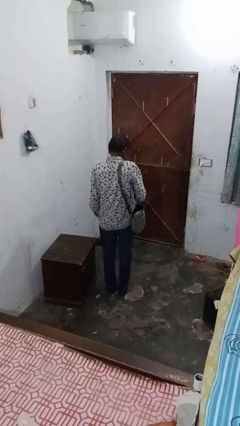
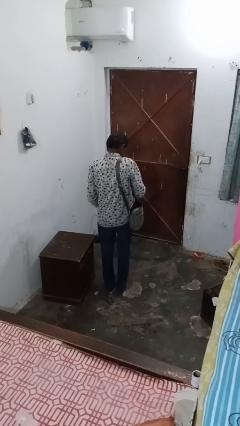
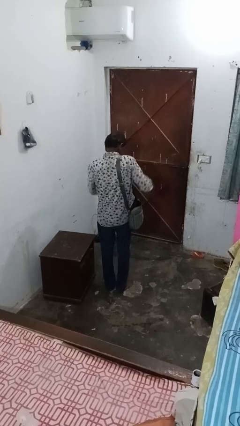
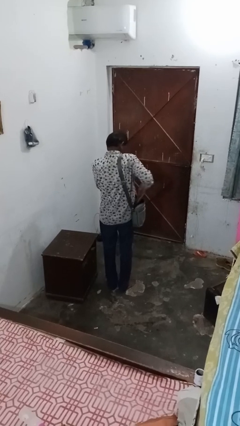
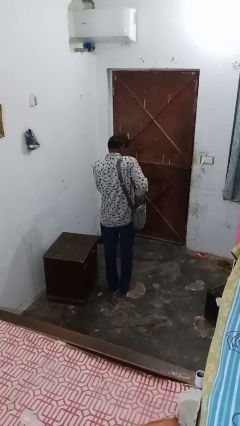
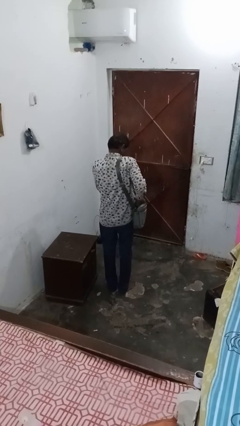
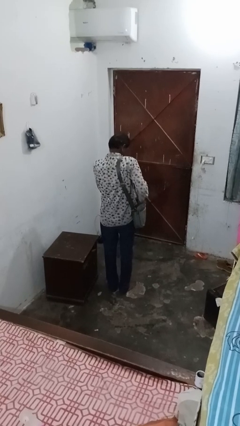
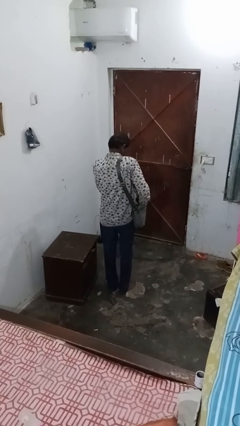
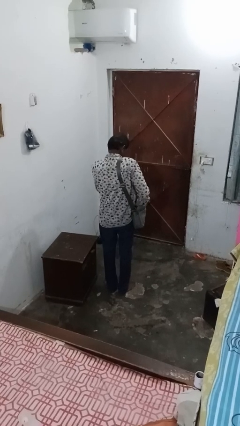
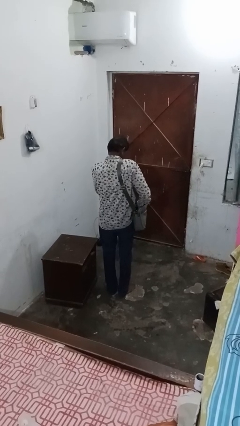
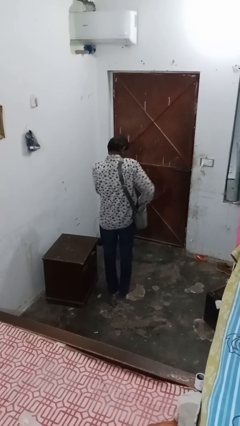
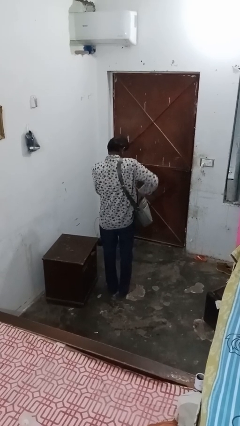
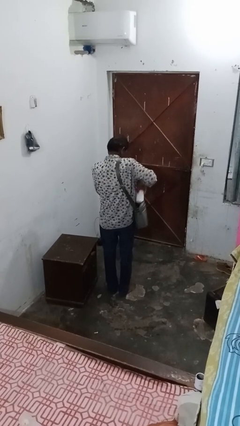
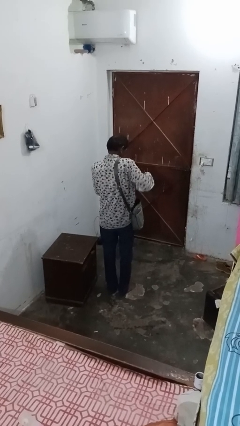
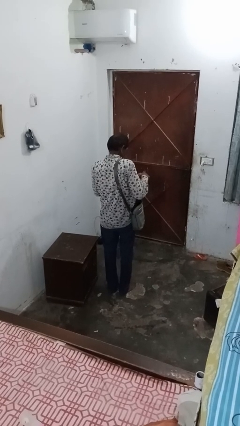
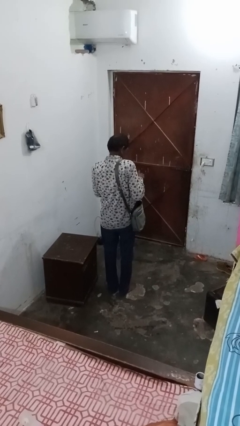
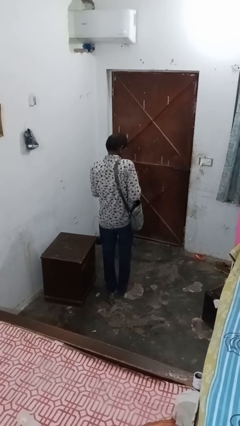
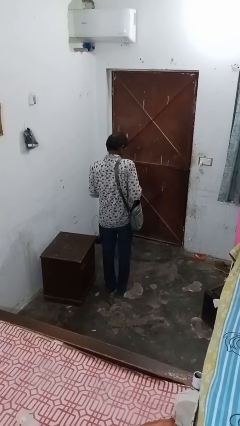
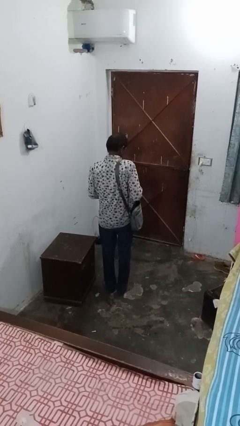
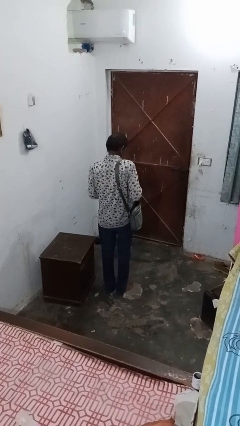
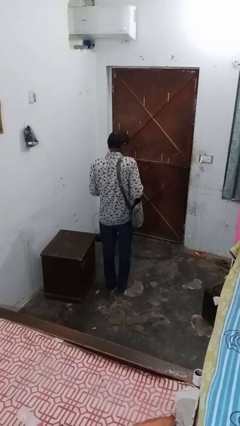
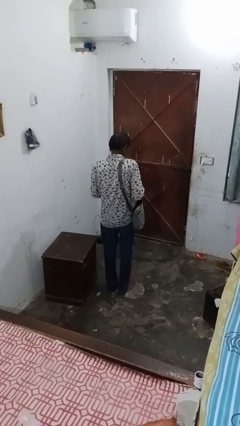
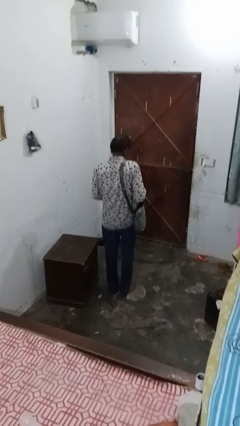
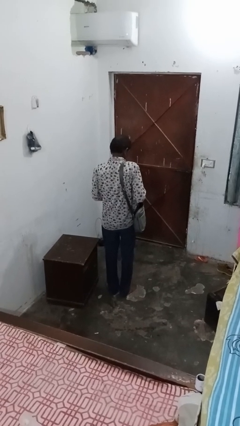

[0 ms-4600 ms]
person takes object from bag

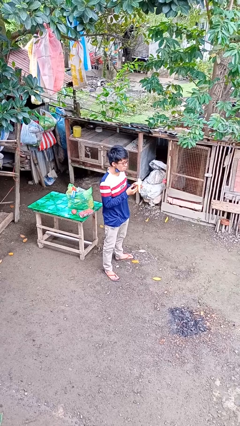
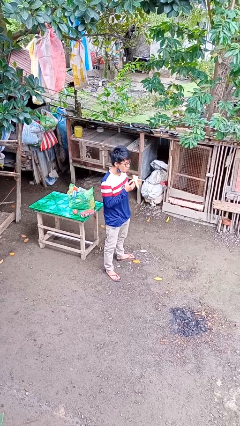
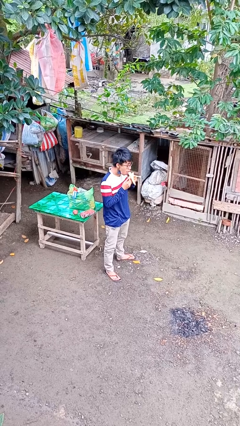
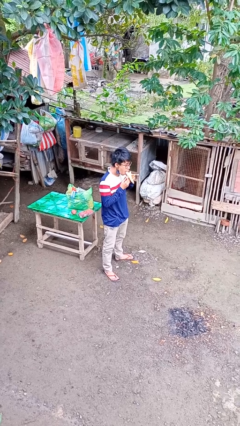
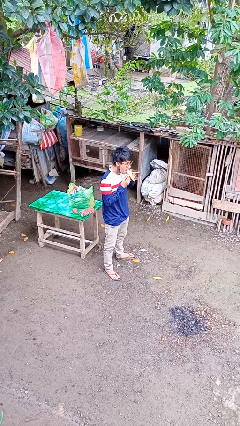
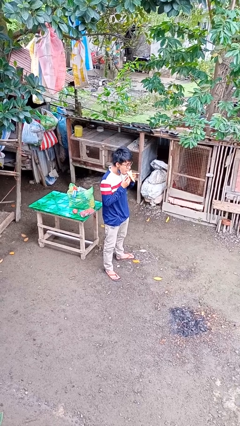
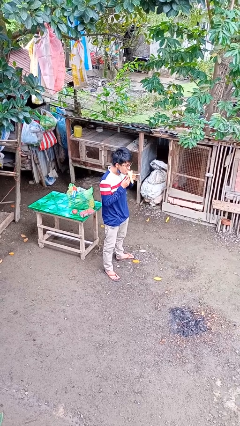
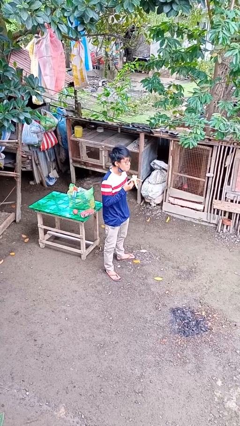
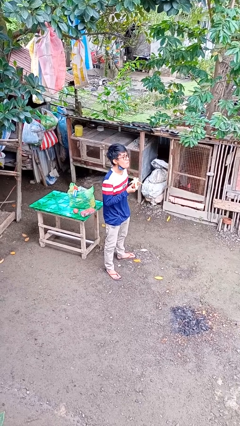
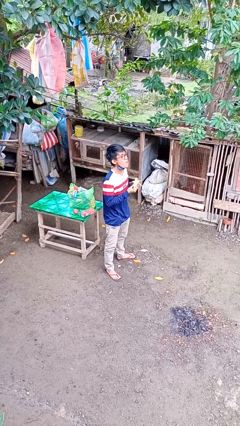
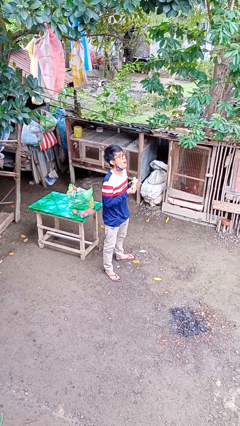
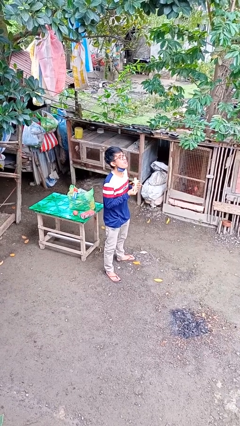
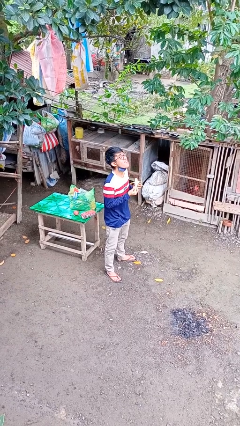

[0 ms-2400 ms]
person eats banana

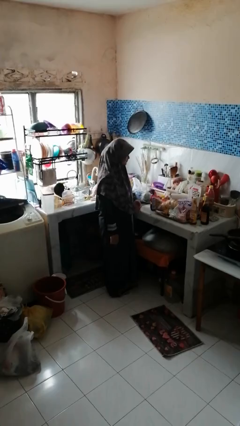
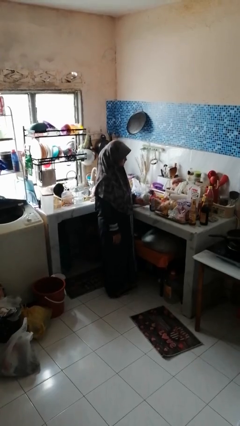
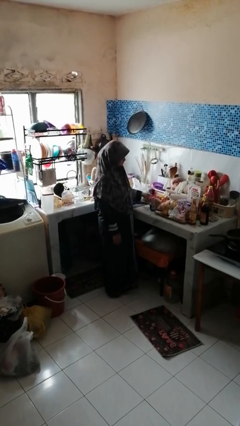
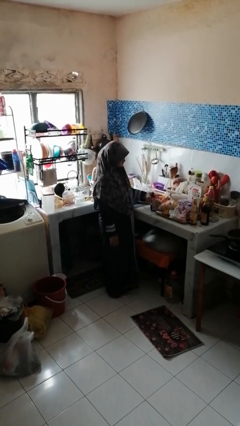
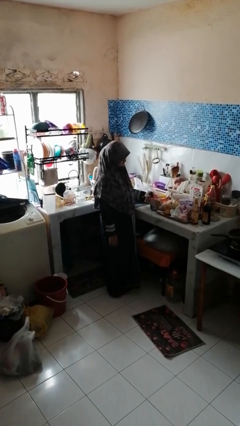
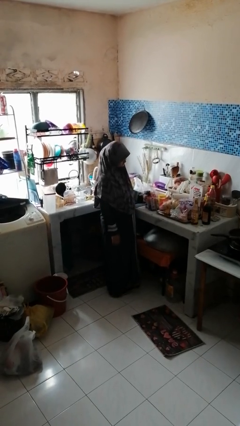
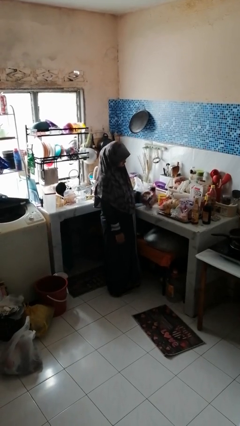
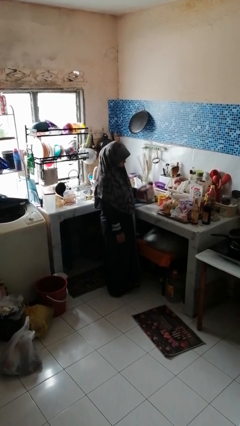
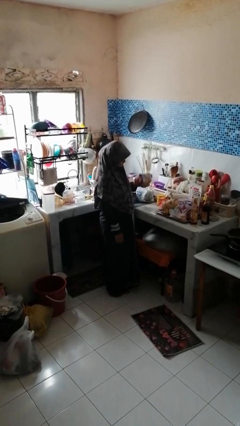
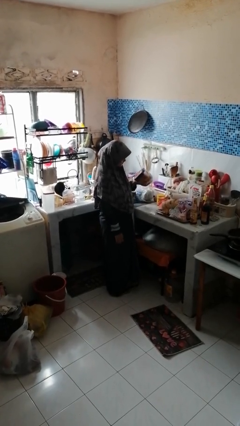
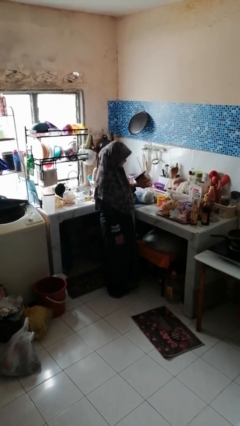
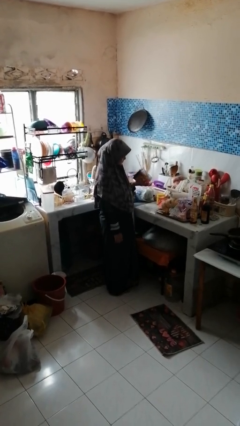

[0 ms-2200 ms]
person picks up object from countertop

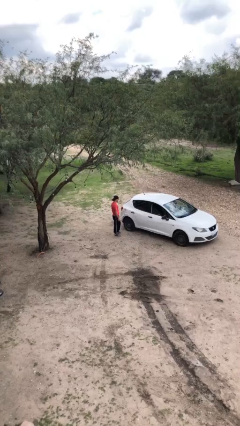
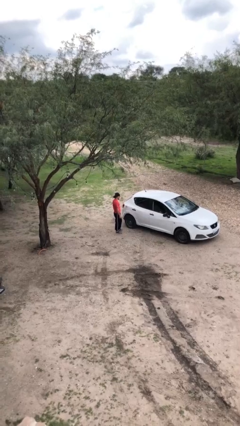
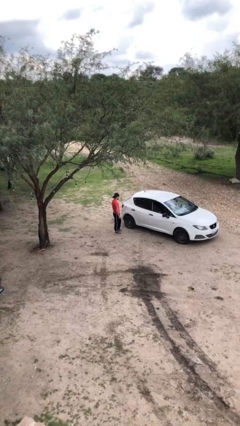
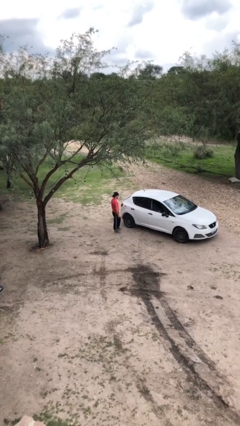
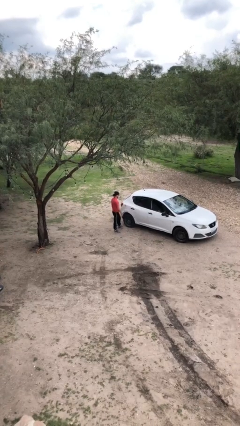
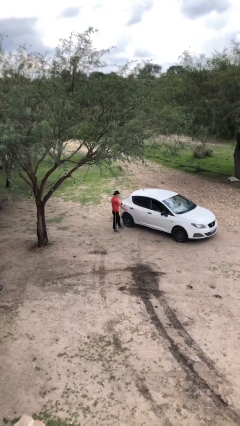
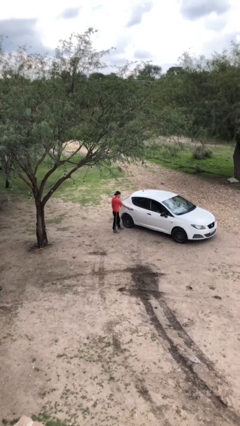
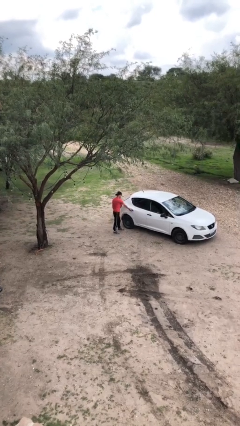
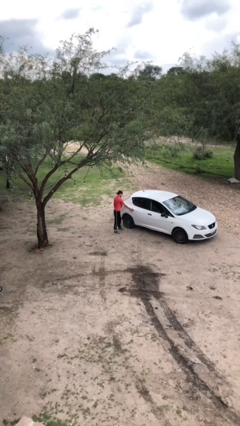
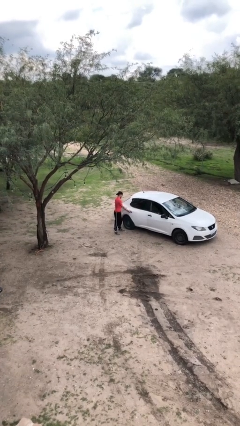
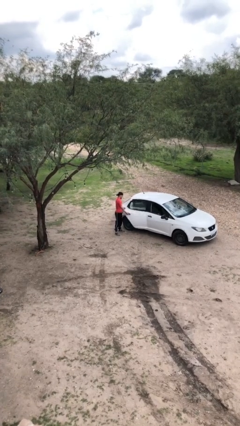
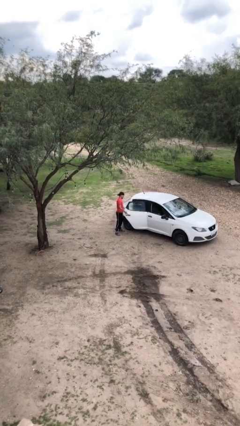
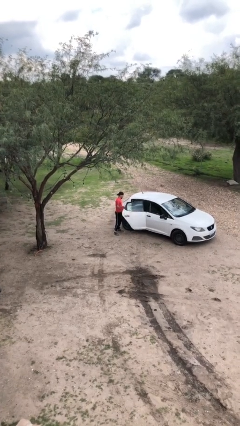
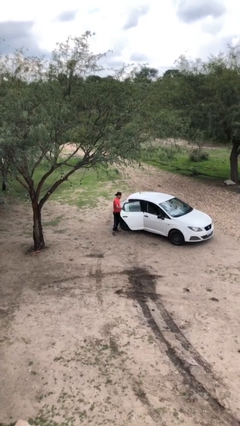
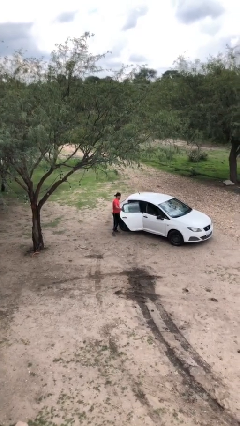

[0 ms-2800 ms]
person opens car door

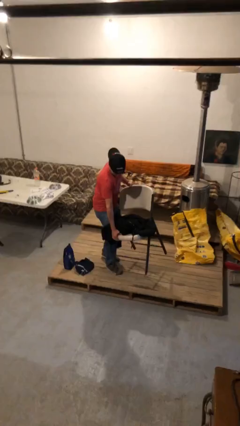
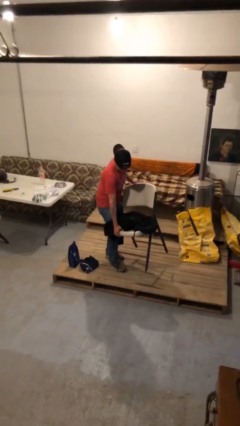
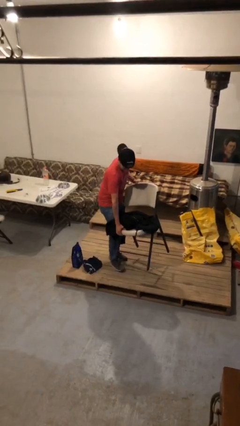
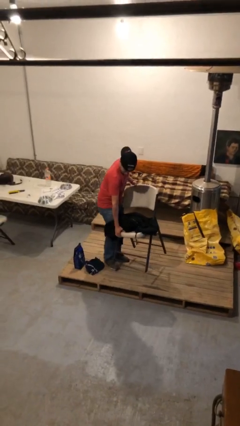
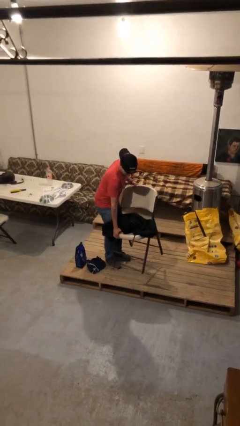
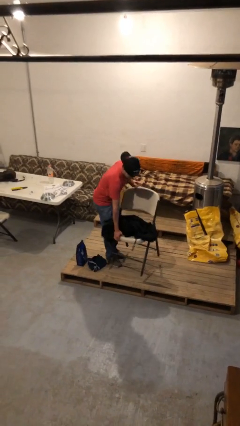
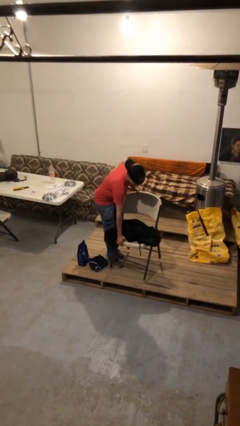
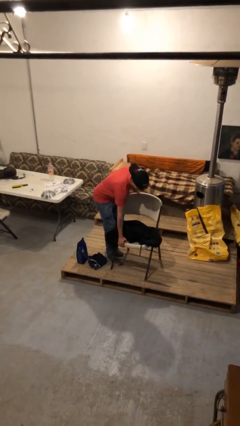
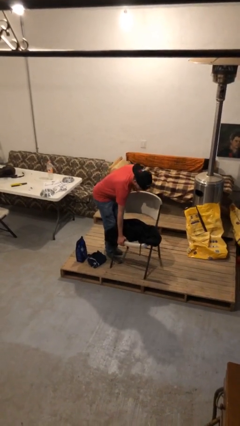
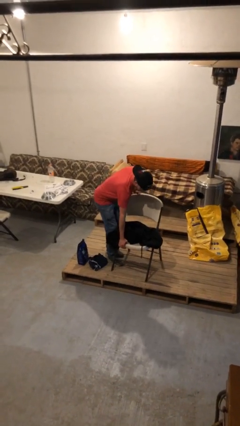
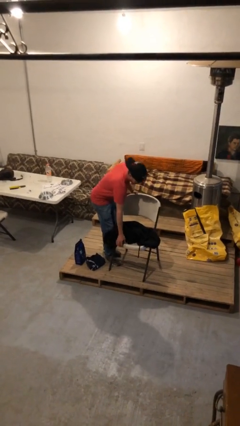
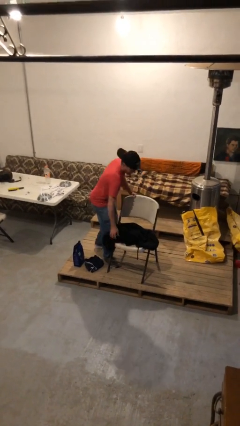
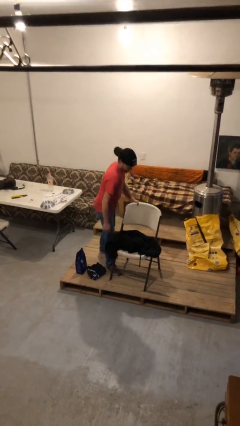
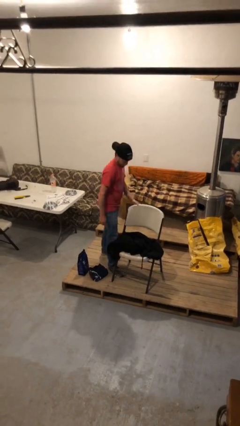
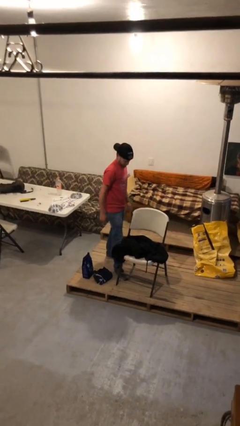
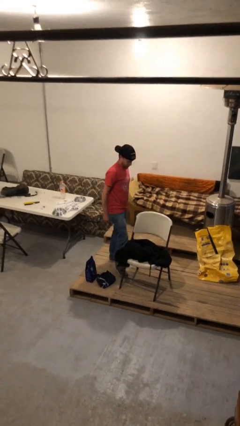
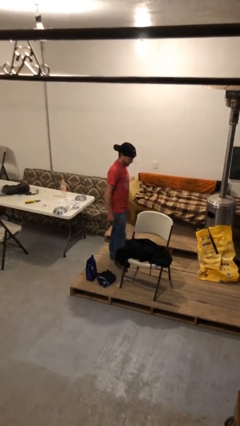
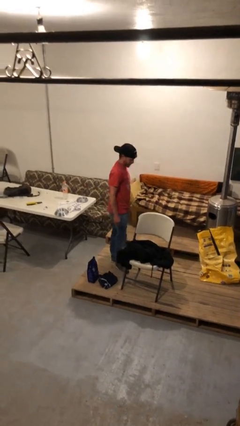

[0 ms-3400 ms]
person puts down object on floor

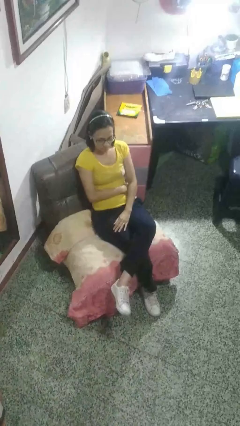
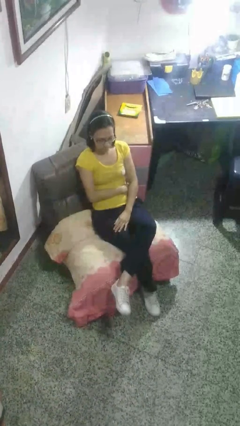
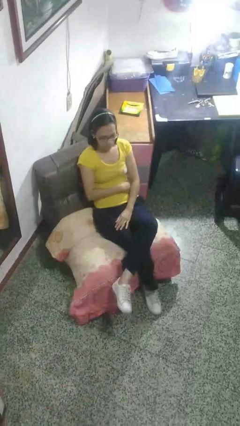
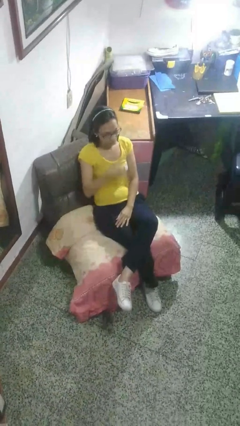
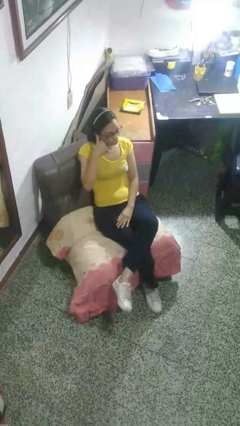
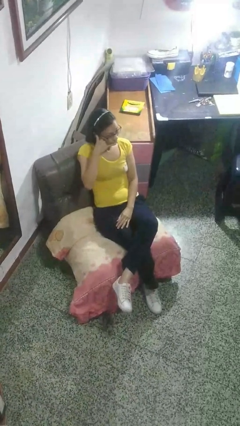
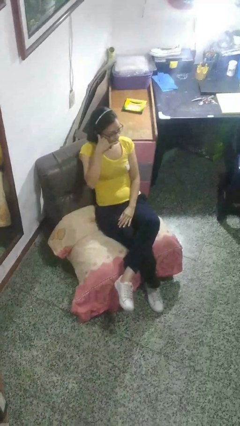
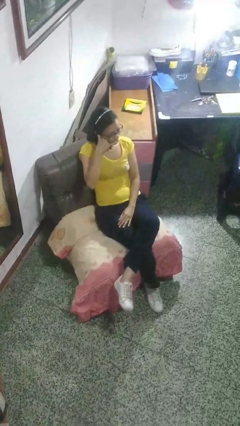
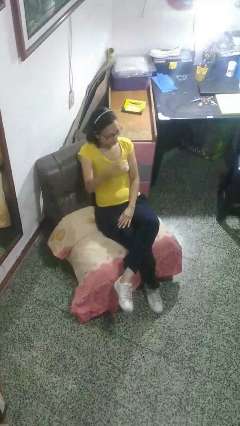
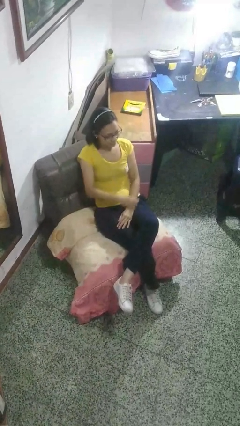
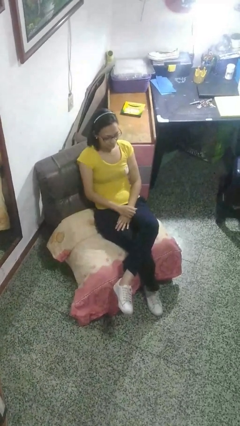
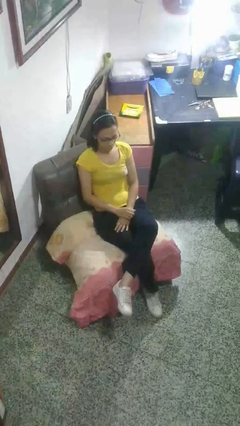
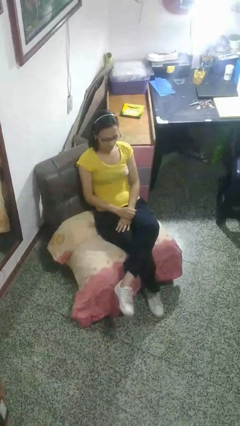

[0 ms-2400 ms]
person gestures call me
